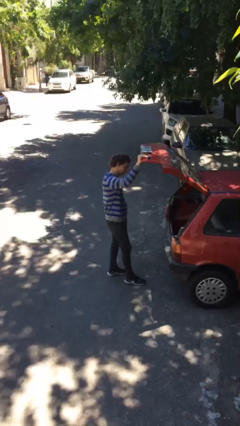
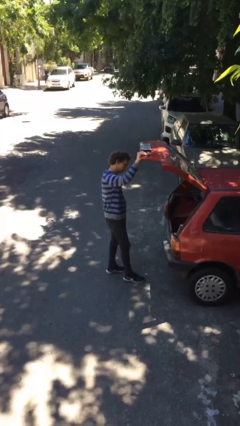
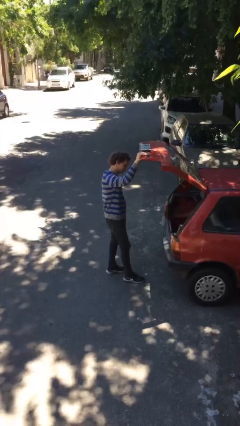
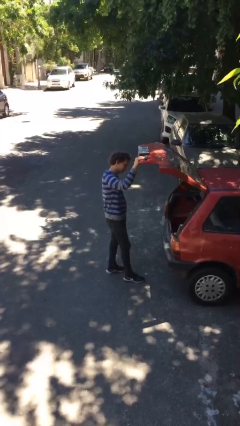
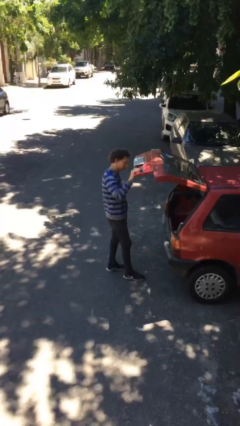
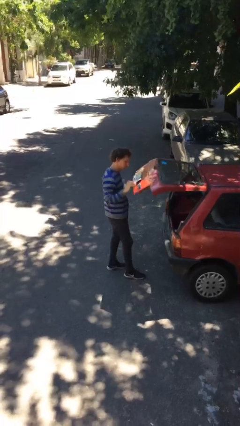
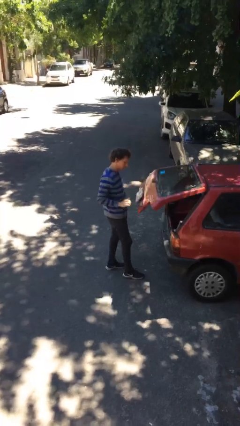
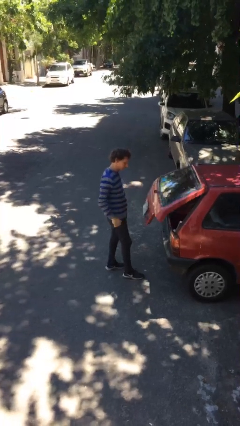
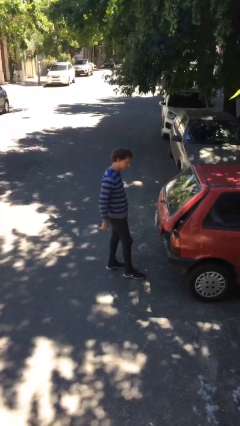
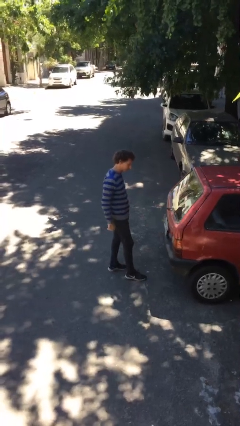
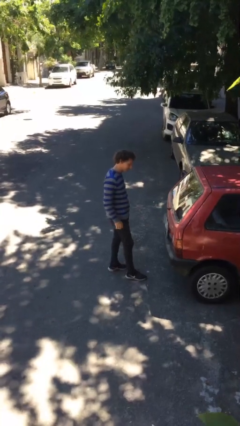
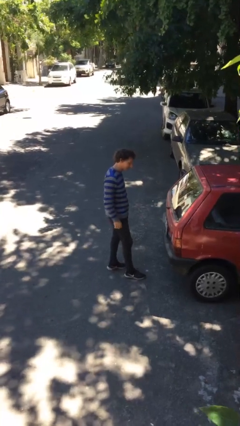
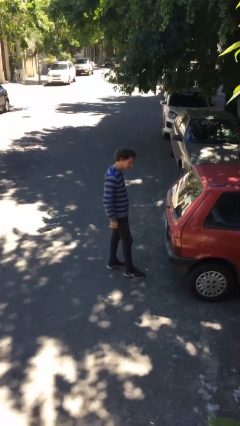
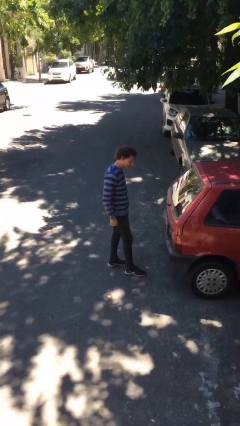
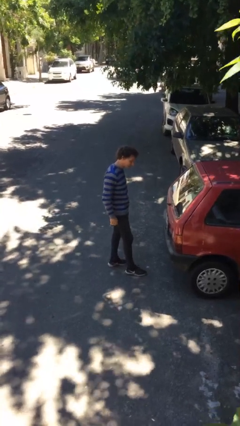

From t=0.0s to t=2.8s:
person closes car trunk

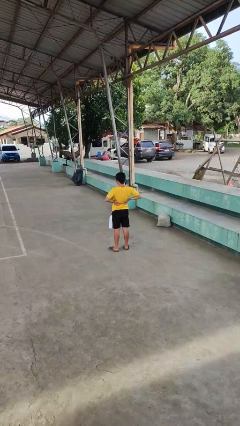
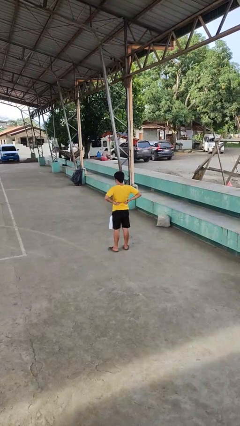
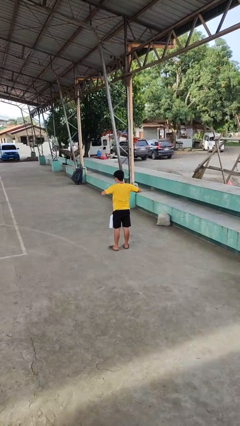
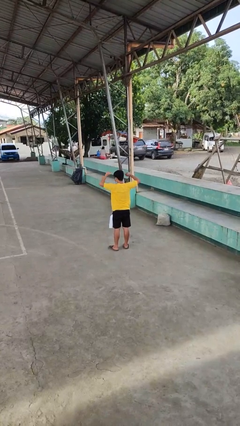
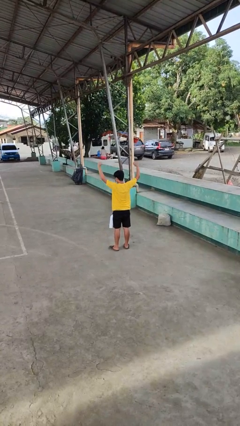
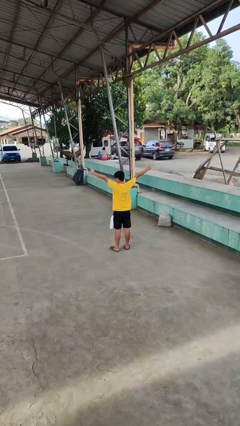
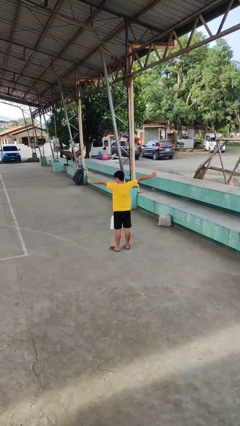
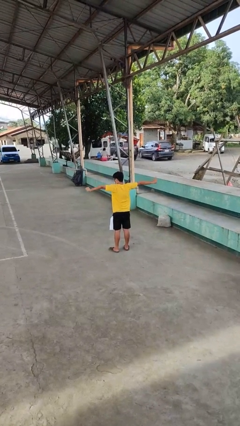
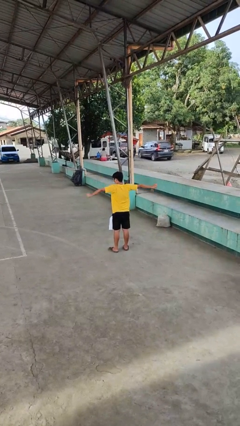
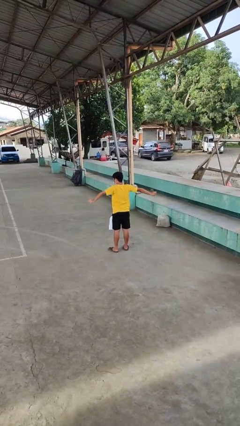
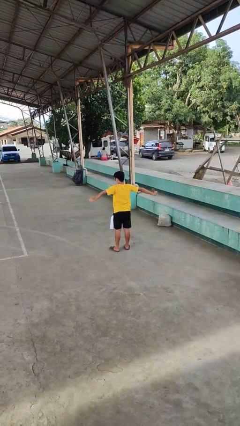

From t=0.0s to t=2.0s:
person stretches arms to side

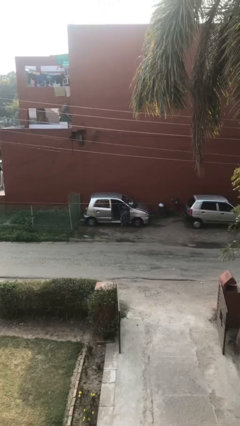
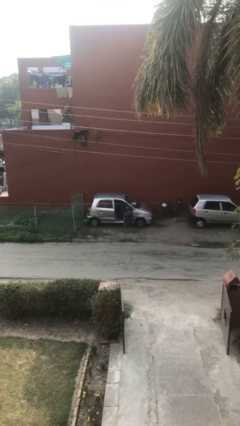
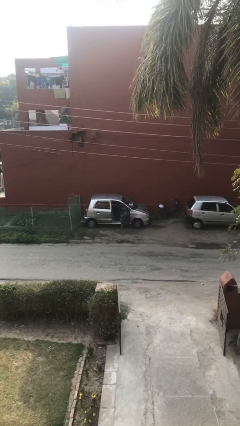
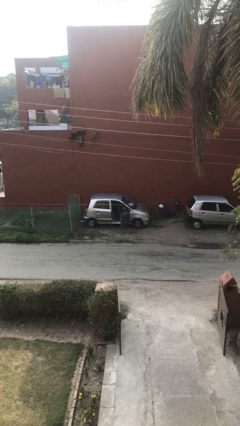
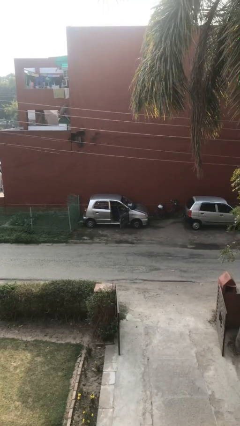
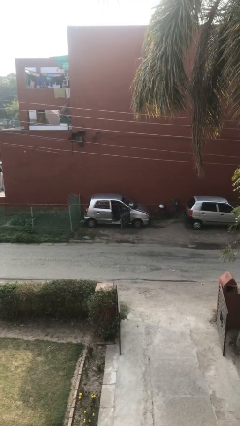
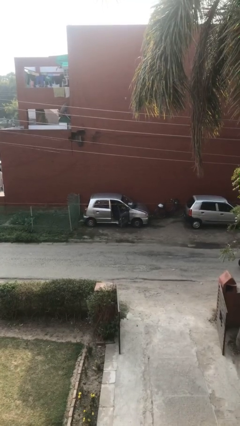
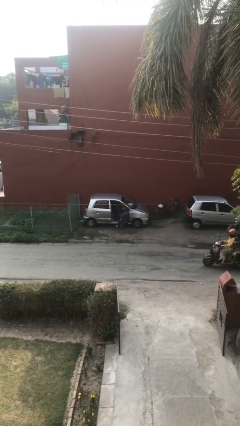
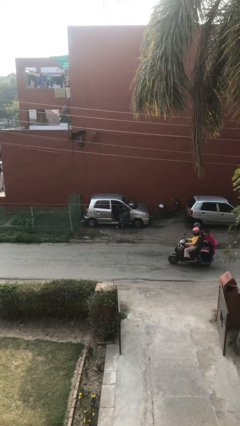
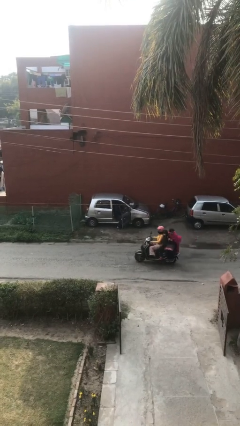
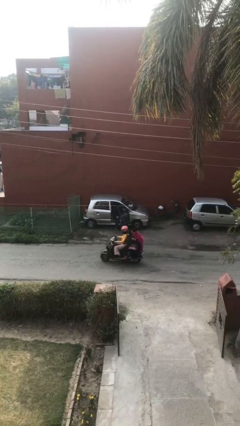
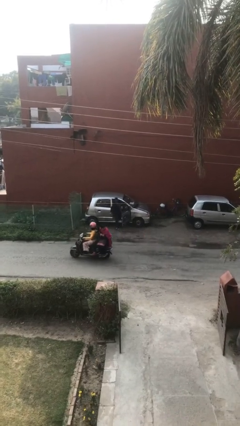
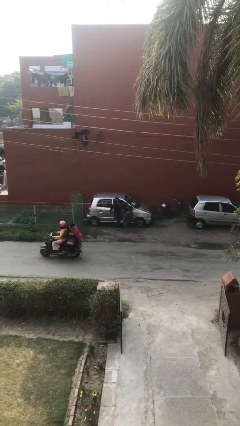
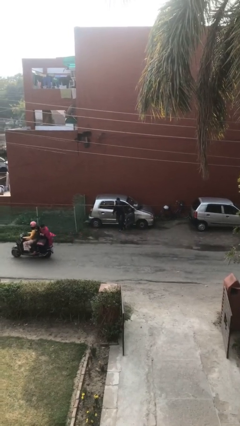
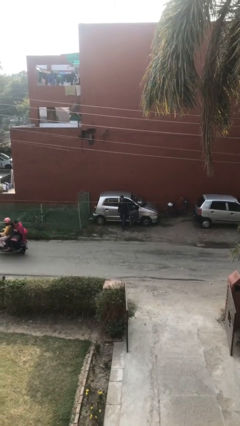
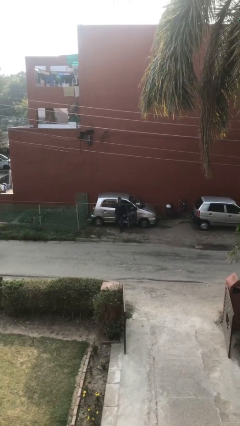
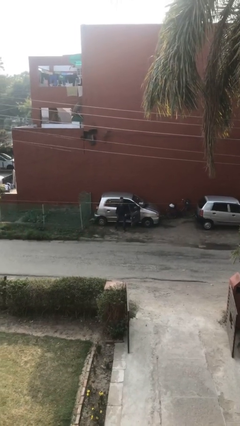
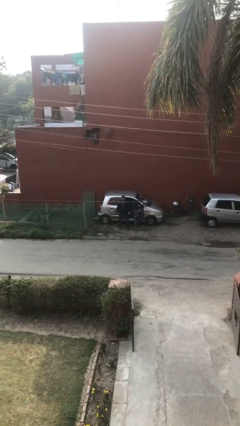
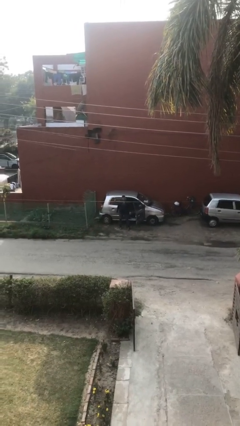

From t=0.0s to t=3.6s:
person exits car

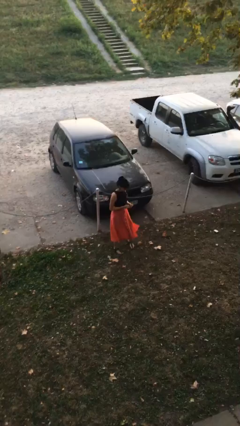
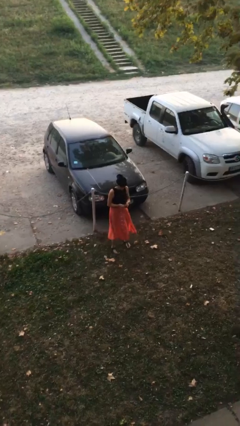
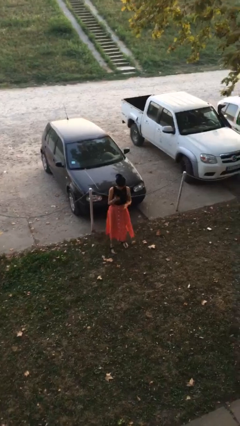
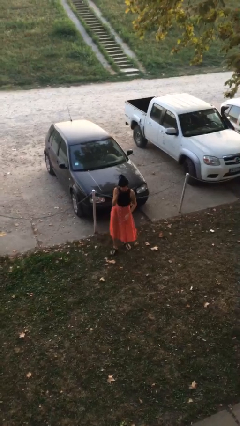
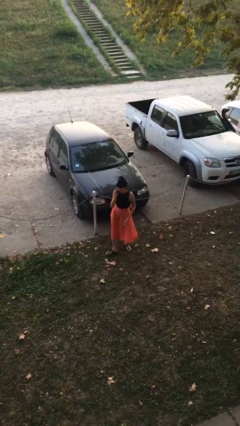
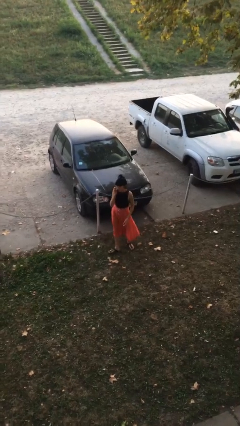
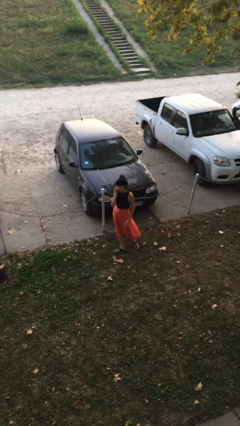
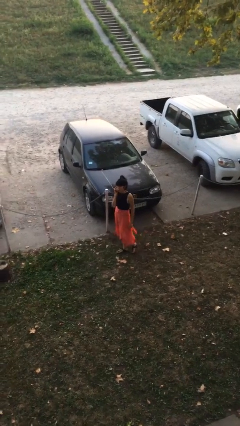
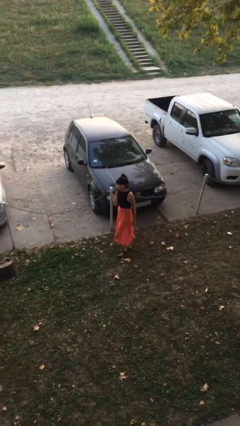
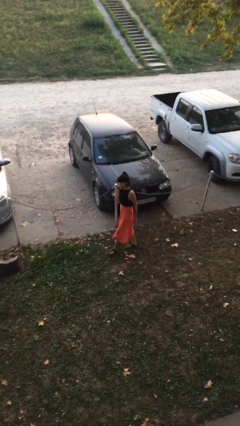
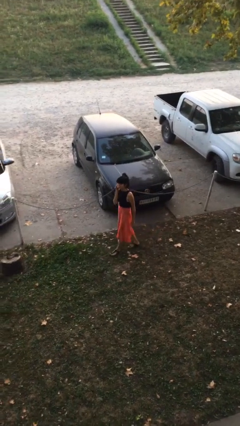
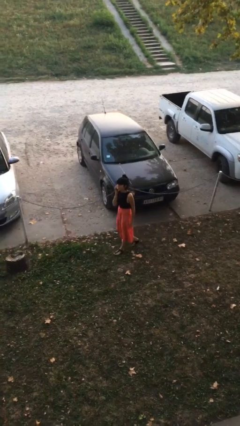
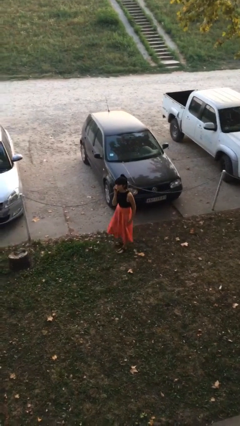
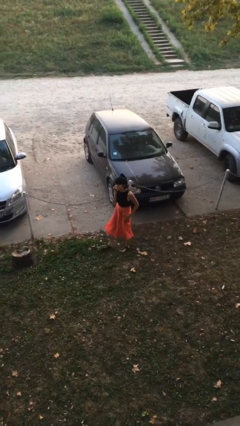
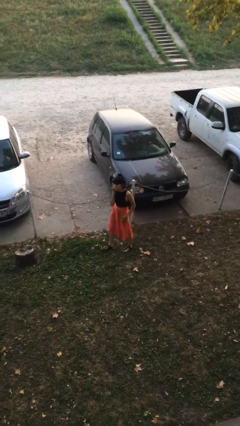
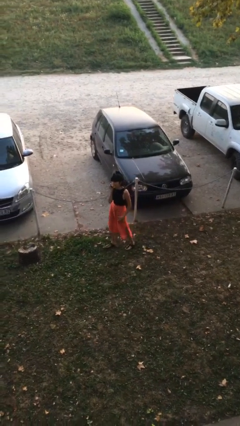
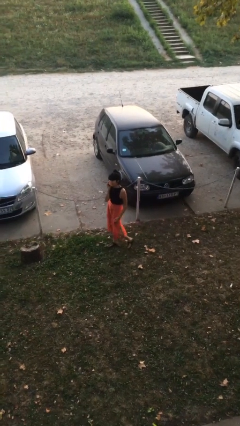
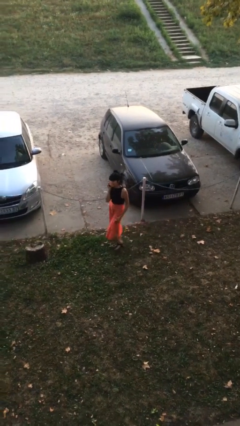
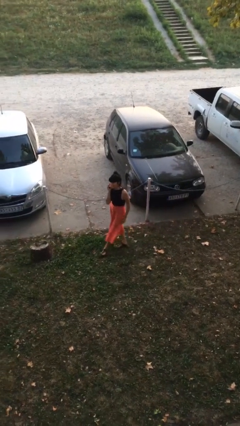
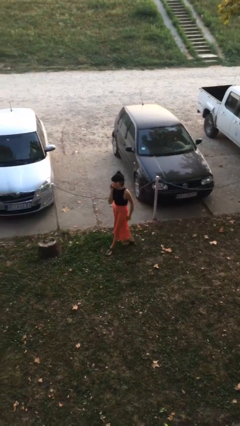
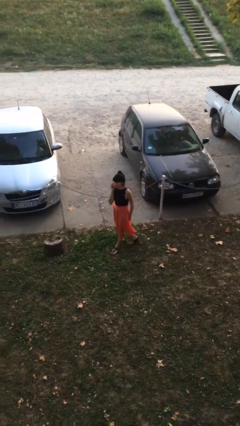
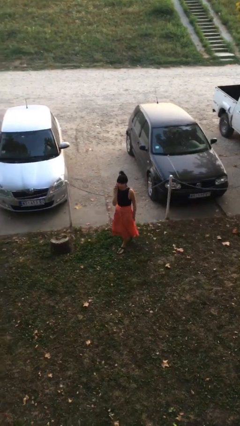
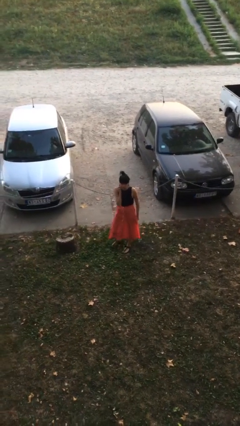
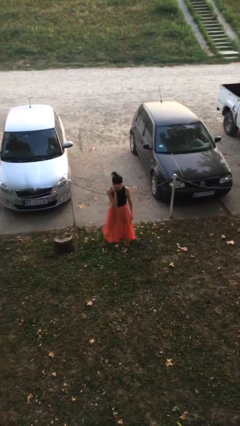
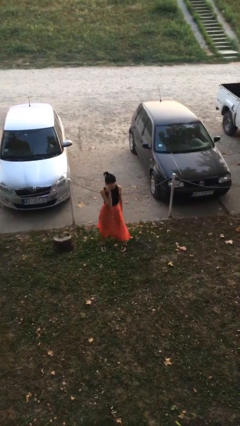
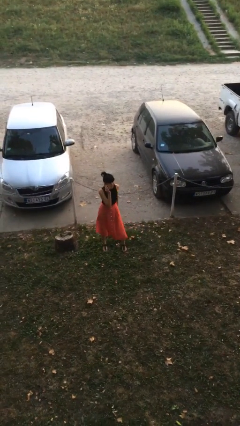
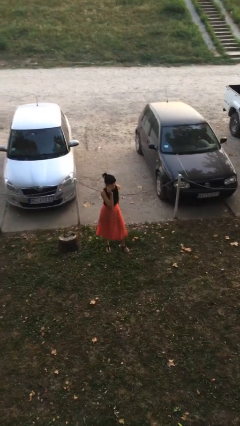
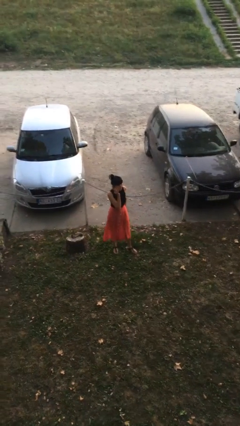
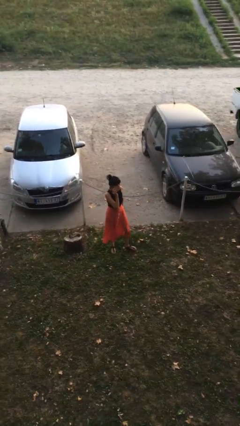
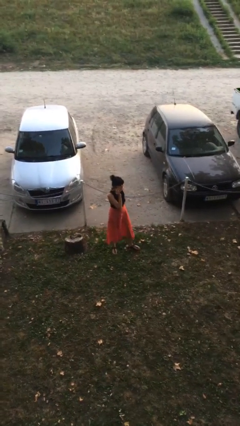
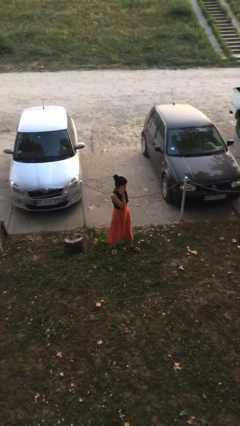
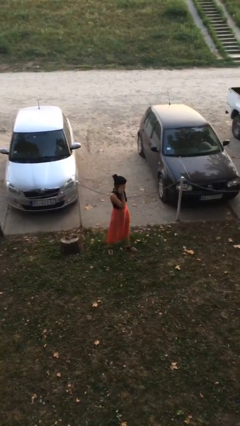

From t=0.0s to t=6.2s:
person talks on phone

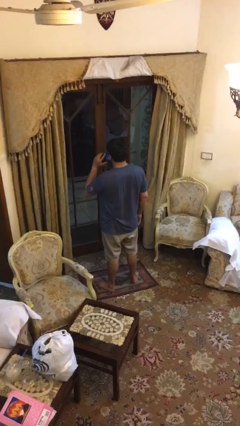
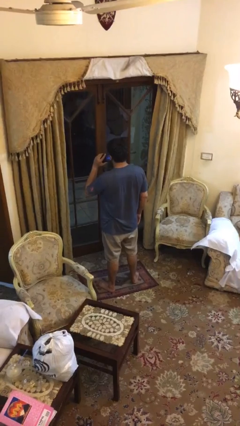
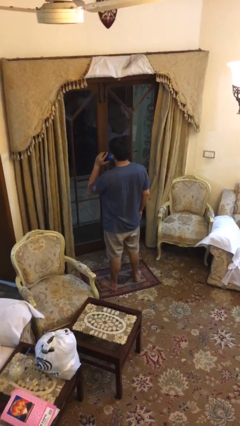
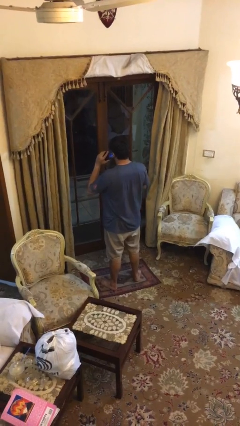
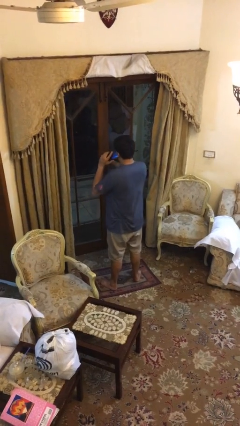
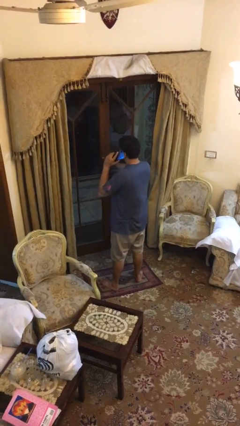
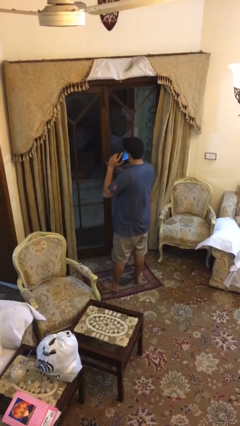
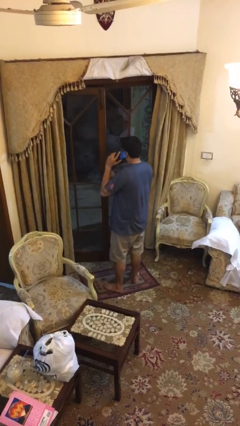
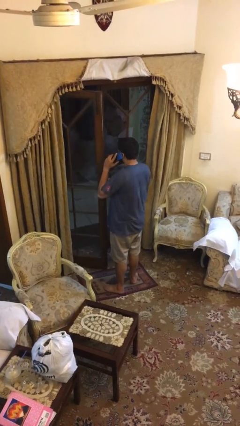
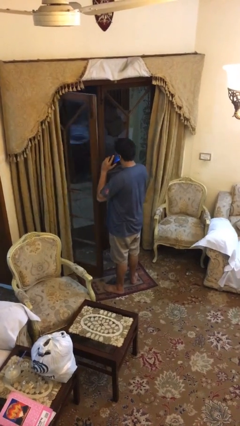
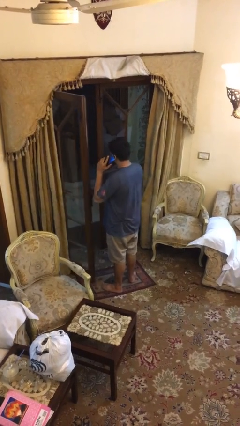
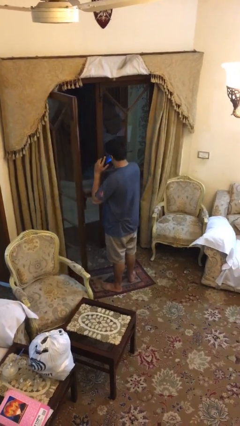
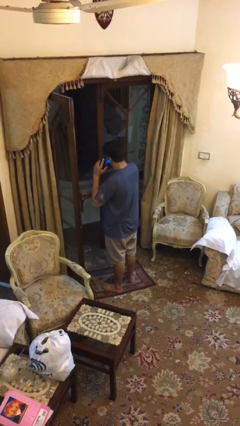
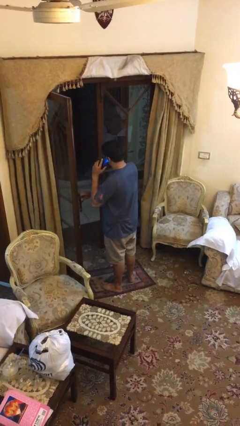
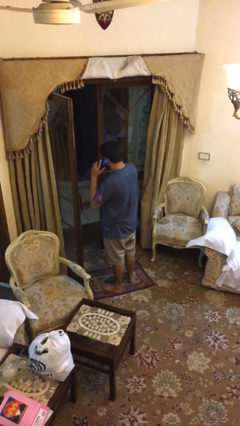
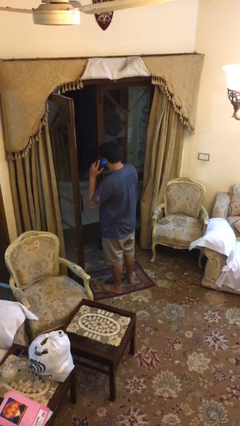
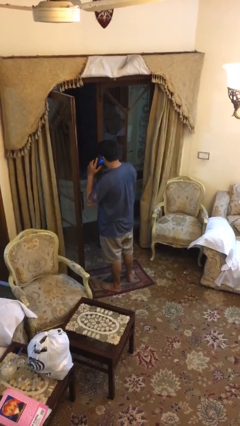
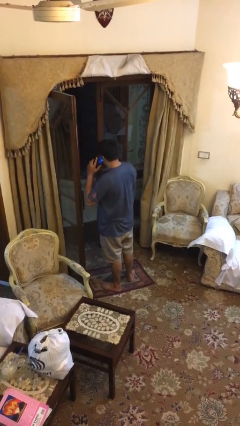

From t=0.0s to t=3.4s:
person opens facility door
